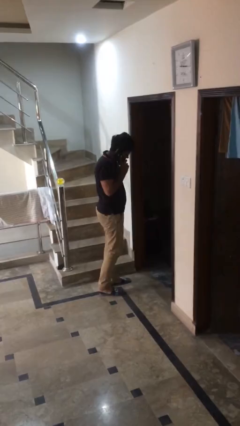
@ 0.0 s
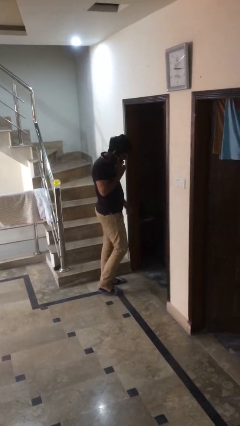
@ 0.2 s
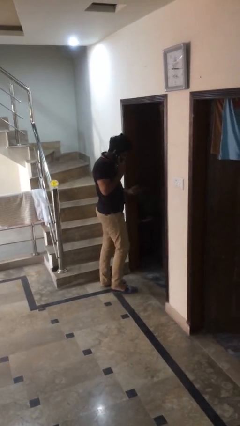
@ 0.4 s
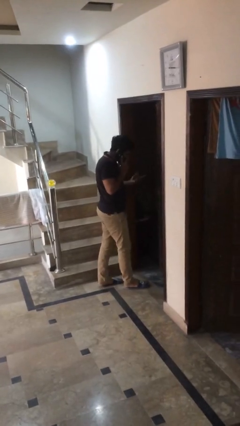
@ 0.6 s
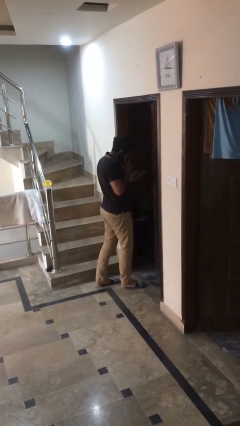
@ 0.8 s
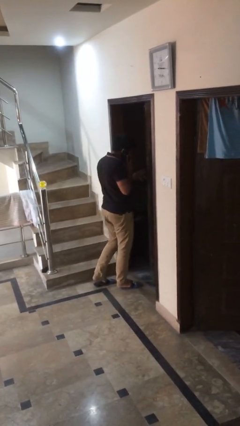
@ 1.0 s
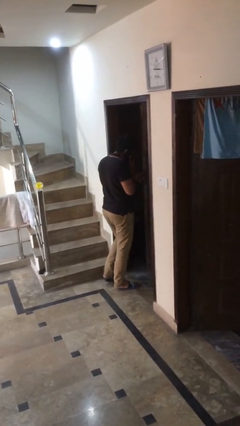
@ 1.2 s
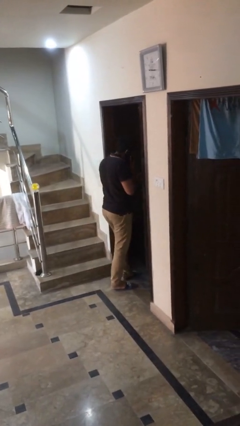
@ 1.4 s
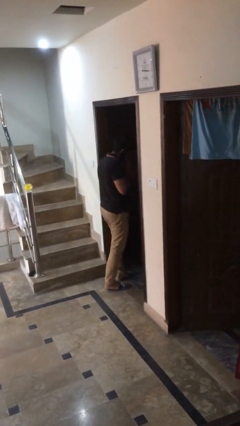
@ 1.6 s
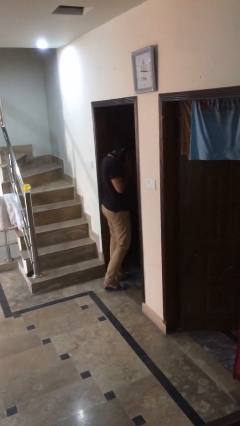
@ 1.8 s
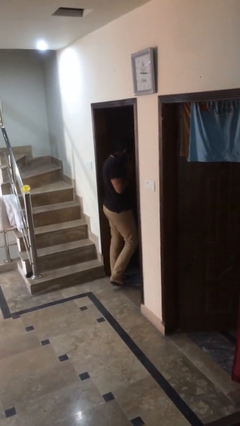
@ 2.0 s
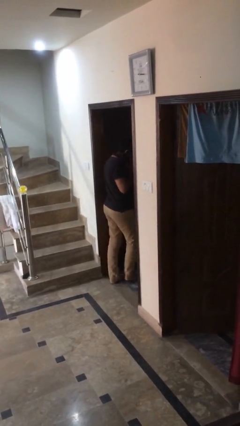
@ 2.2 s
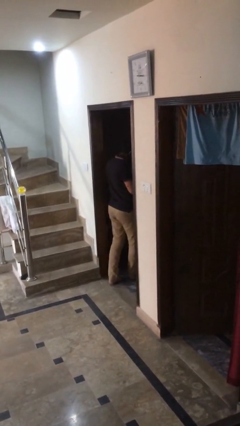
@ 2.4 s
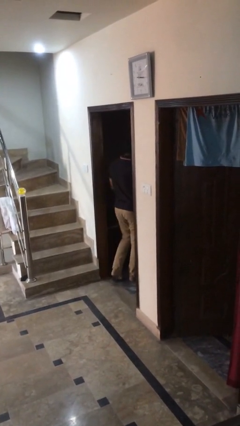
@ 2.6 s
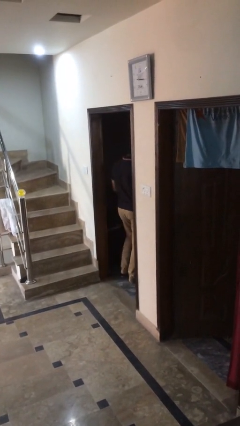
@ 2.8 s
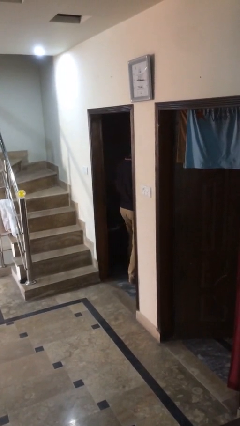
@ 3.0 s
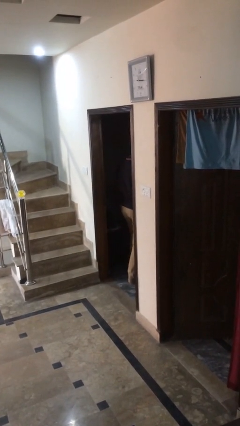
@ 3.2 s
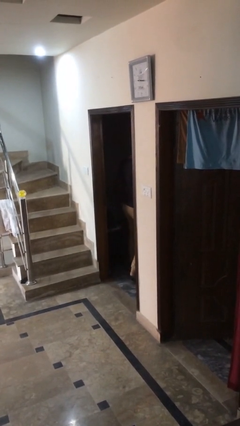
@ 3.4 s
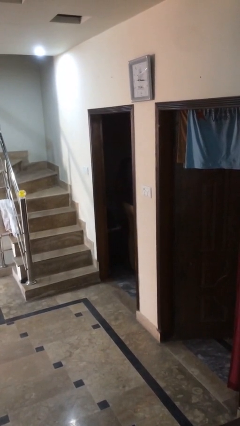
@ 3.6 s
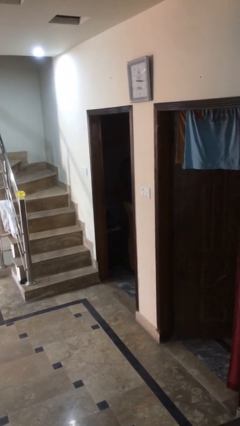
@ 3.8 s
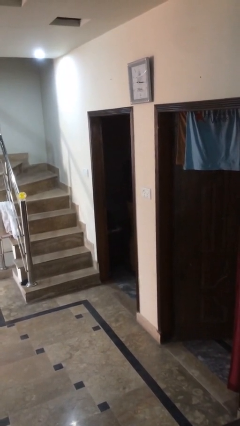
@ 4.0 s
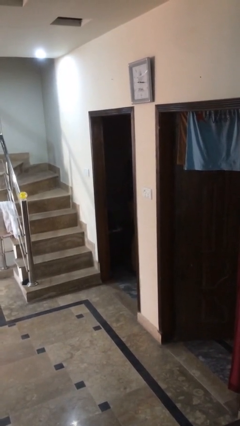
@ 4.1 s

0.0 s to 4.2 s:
person exits scene through structure

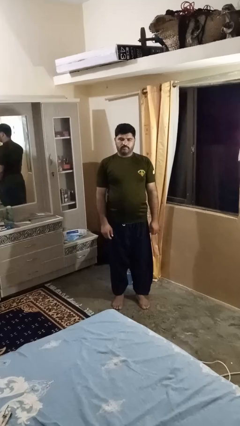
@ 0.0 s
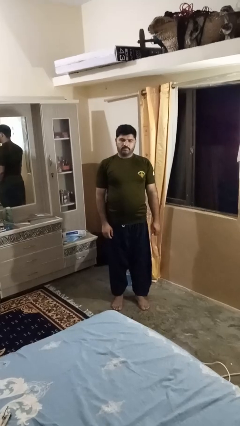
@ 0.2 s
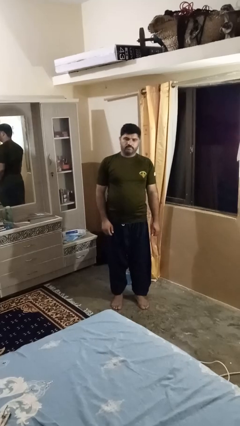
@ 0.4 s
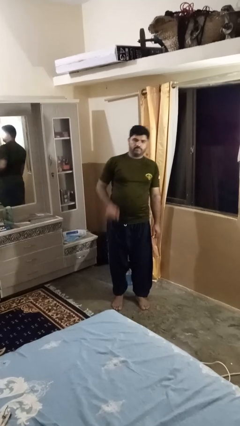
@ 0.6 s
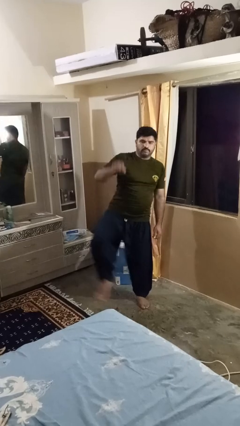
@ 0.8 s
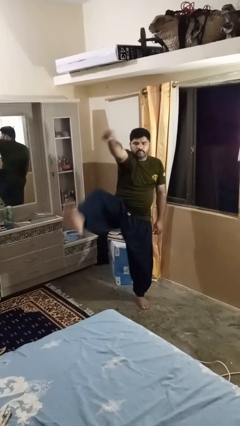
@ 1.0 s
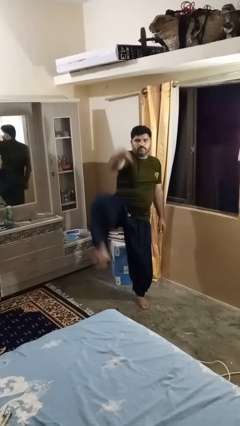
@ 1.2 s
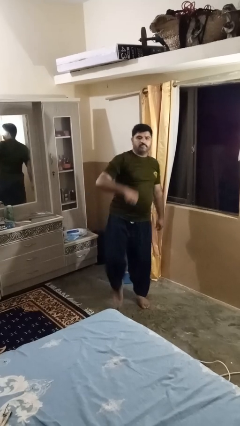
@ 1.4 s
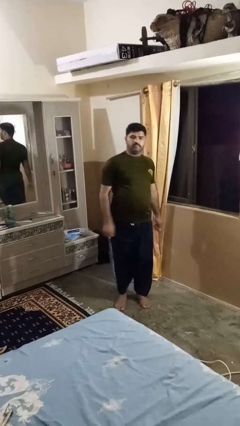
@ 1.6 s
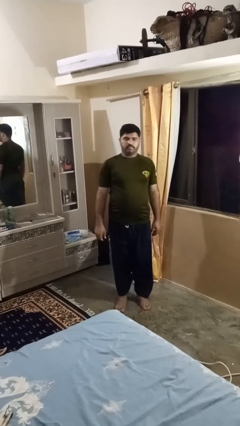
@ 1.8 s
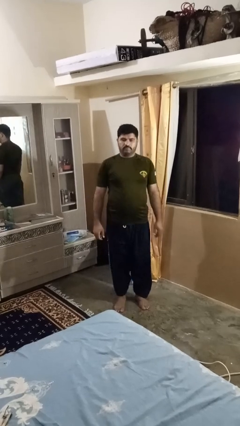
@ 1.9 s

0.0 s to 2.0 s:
person karate chop

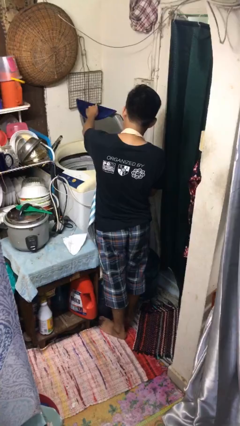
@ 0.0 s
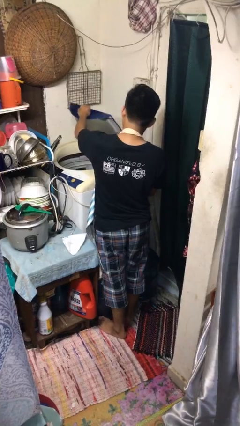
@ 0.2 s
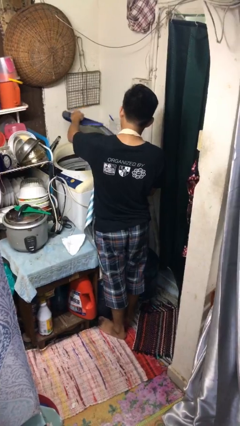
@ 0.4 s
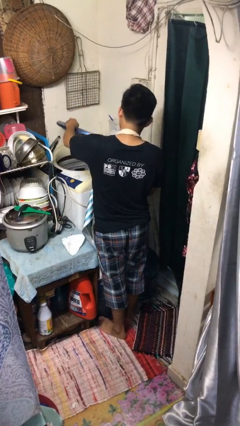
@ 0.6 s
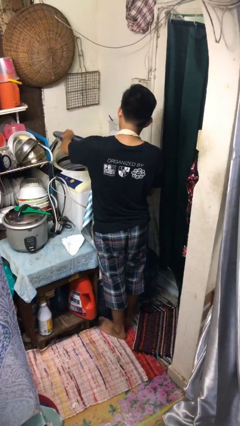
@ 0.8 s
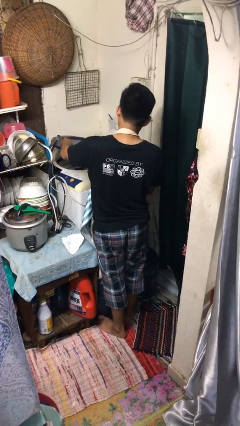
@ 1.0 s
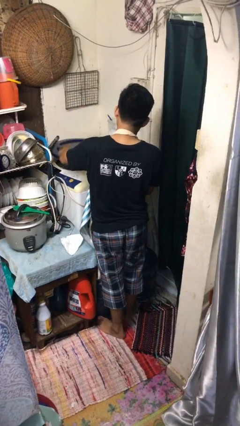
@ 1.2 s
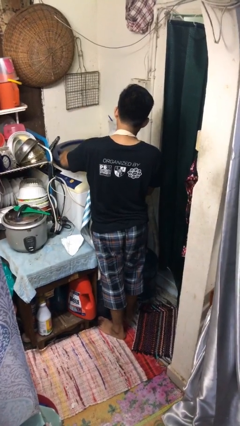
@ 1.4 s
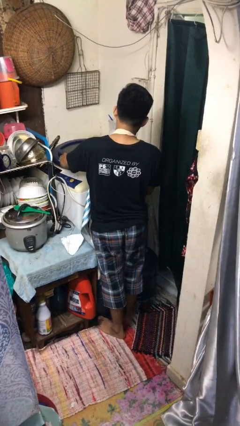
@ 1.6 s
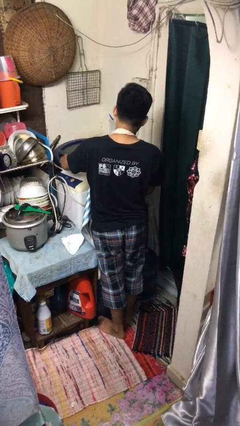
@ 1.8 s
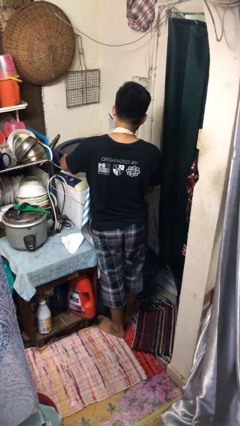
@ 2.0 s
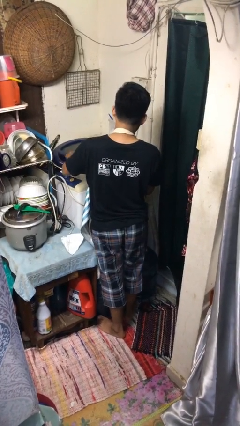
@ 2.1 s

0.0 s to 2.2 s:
person closes clothes washer

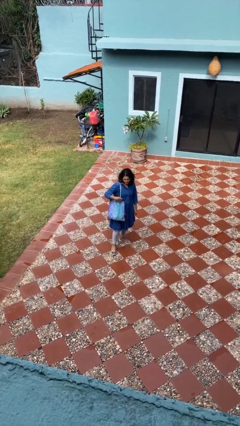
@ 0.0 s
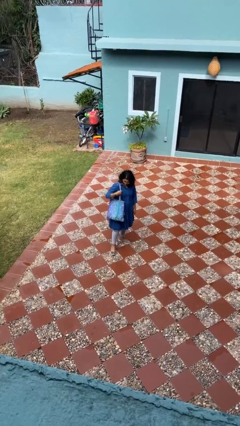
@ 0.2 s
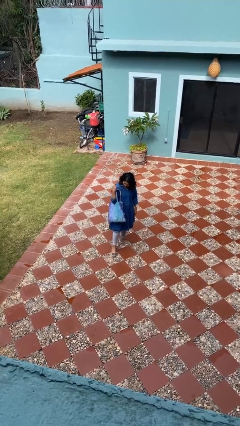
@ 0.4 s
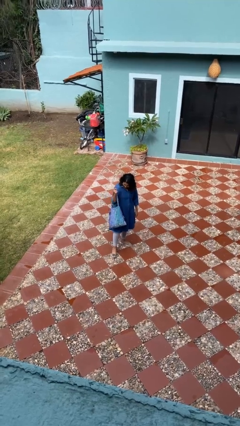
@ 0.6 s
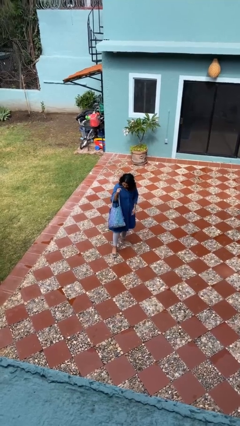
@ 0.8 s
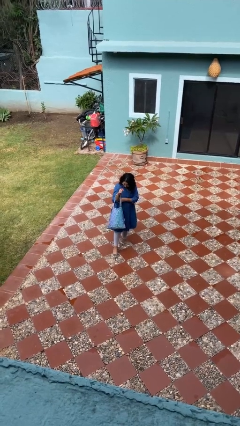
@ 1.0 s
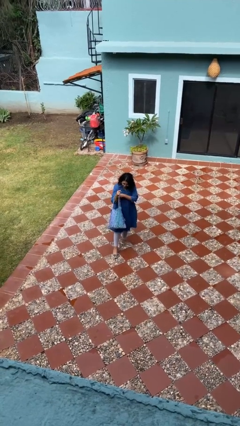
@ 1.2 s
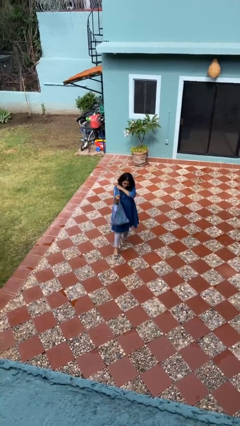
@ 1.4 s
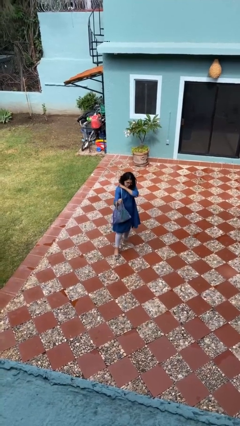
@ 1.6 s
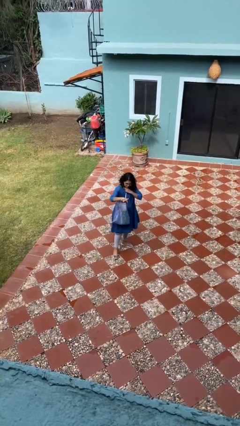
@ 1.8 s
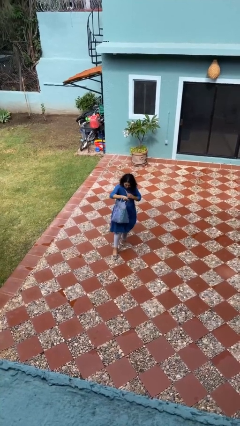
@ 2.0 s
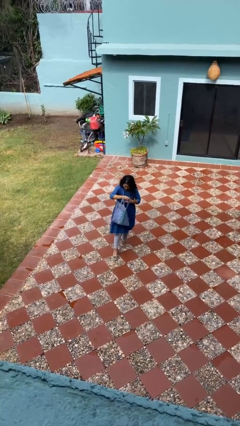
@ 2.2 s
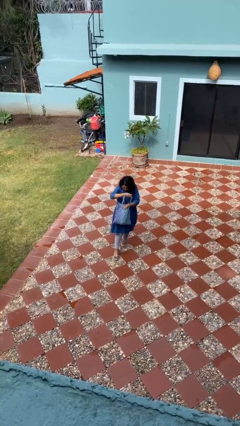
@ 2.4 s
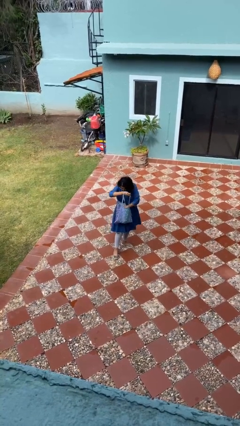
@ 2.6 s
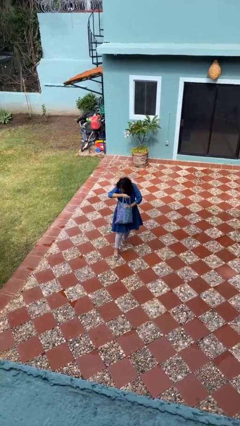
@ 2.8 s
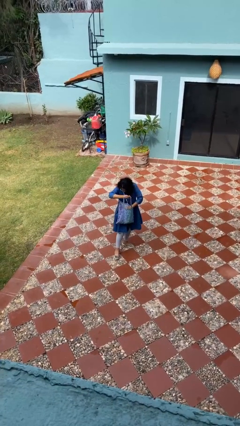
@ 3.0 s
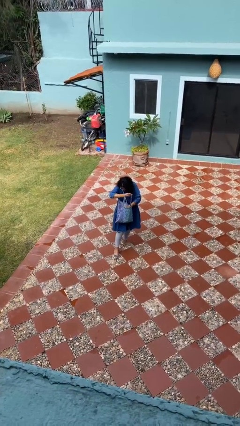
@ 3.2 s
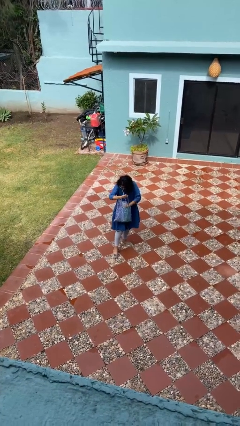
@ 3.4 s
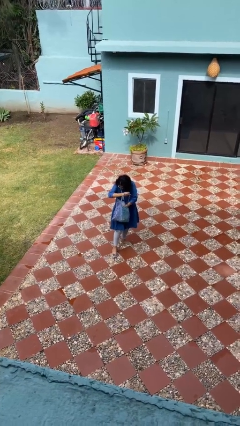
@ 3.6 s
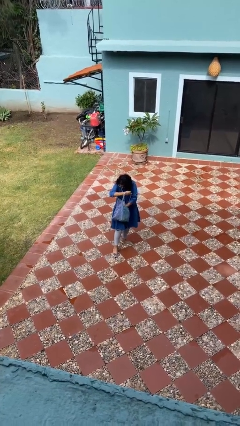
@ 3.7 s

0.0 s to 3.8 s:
person searches in purse

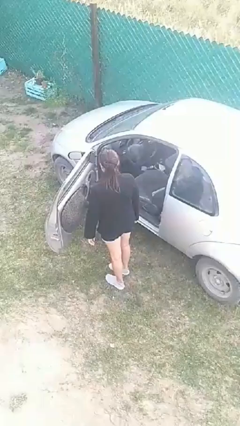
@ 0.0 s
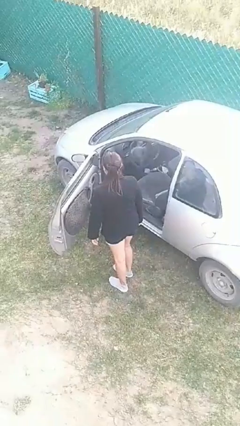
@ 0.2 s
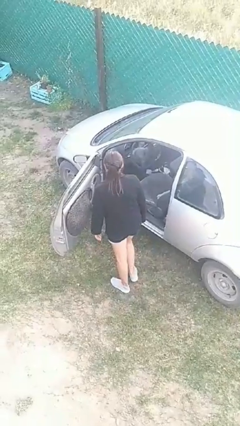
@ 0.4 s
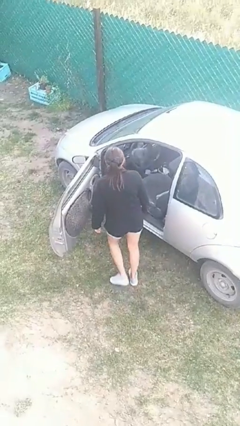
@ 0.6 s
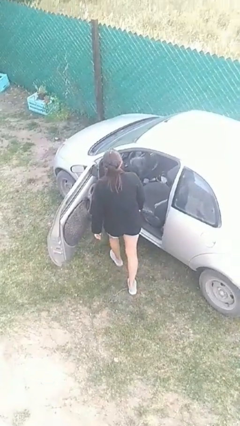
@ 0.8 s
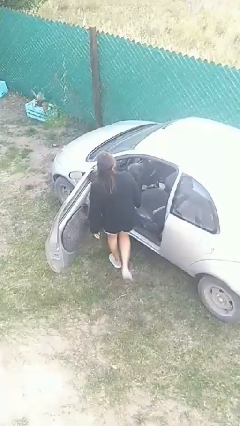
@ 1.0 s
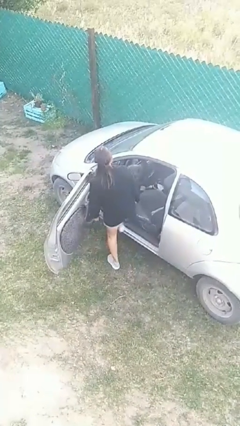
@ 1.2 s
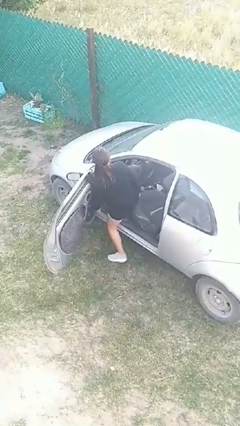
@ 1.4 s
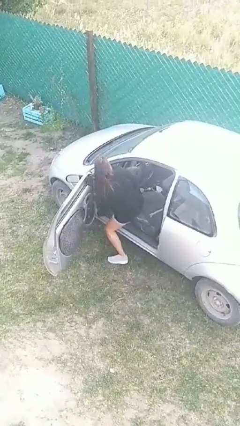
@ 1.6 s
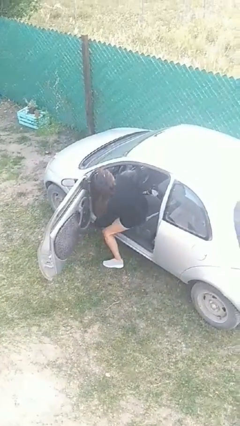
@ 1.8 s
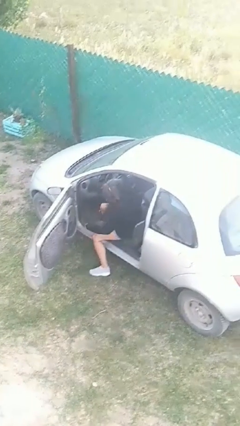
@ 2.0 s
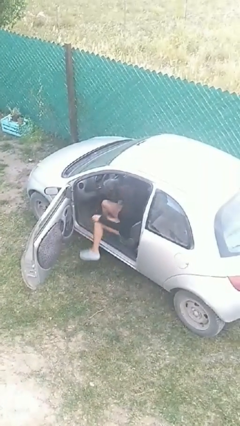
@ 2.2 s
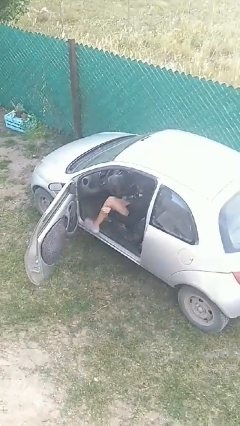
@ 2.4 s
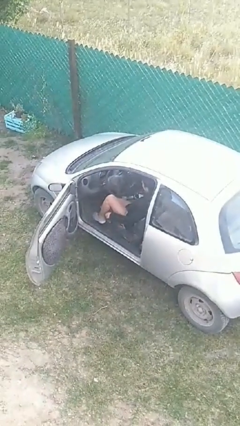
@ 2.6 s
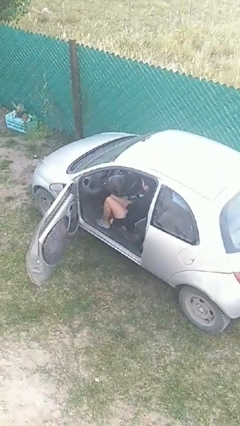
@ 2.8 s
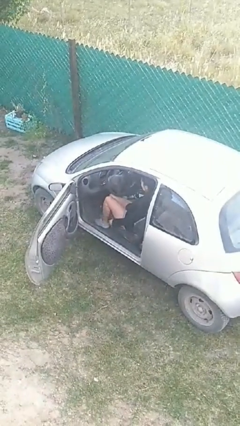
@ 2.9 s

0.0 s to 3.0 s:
person enters car

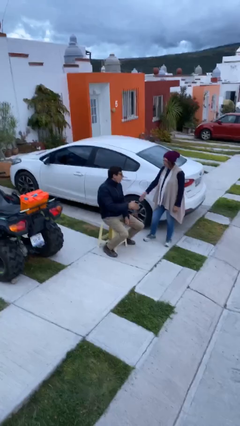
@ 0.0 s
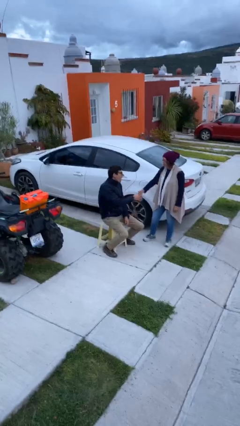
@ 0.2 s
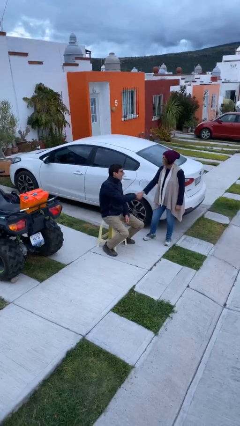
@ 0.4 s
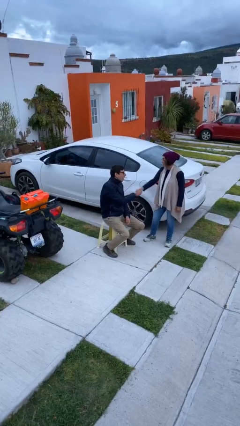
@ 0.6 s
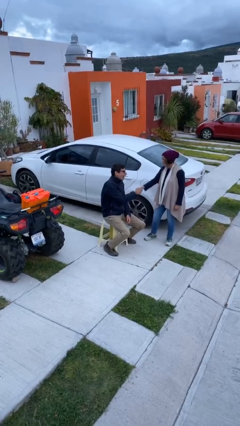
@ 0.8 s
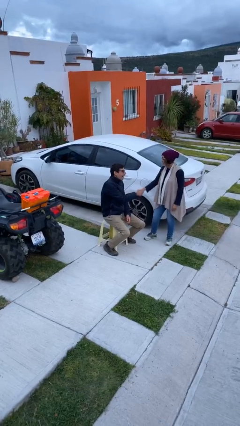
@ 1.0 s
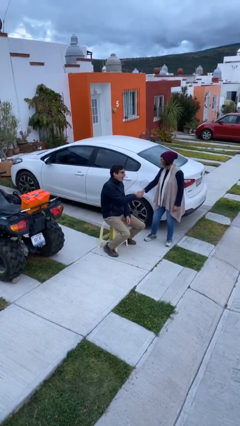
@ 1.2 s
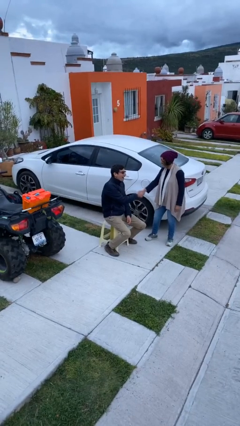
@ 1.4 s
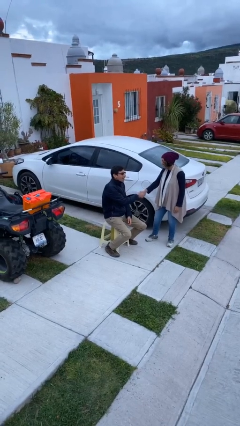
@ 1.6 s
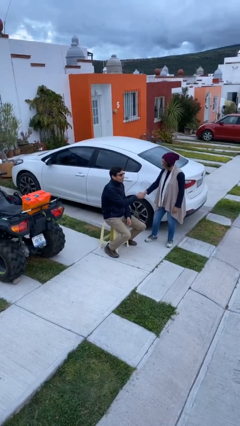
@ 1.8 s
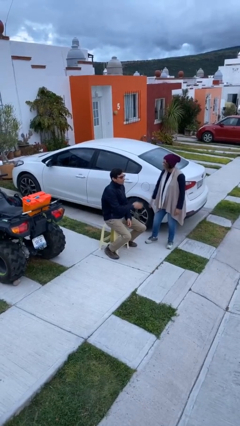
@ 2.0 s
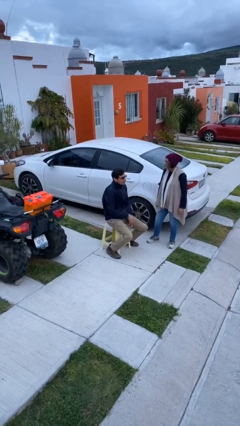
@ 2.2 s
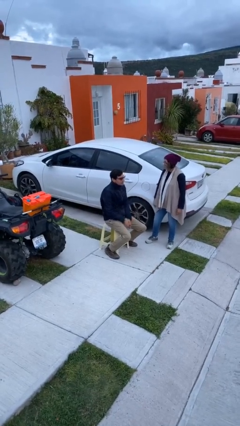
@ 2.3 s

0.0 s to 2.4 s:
person shakes hand
